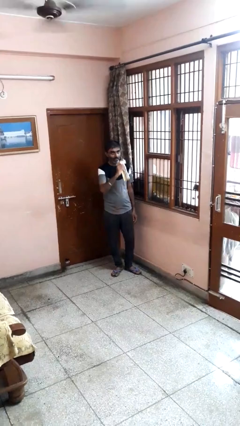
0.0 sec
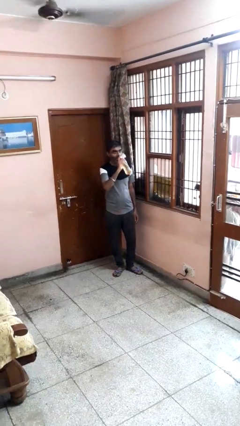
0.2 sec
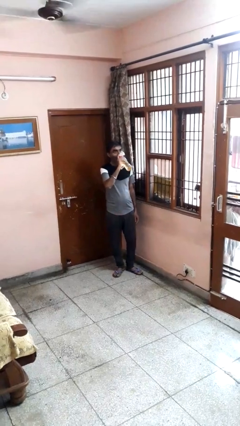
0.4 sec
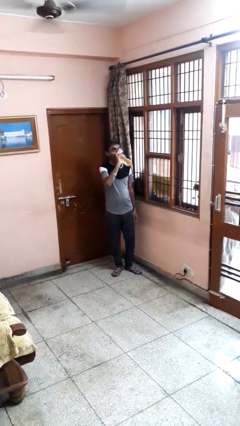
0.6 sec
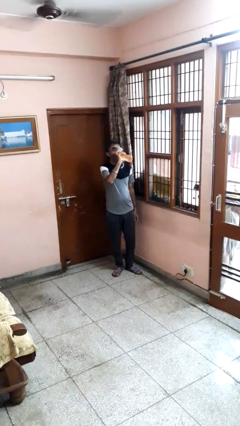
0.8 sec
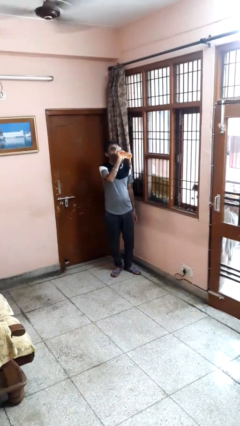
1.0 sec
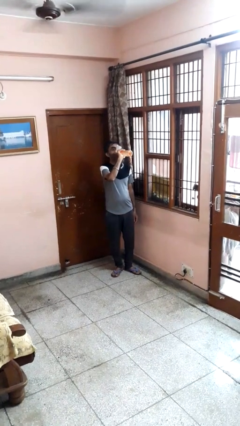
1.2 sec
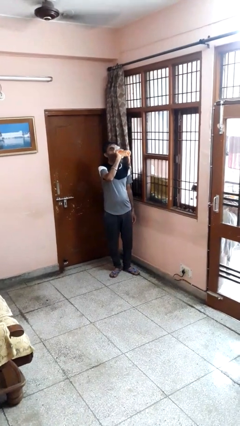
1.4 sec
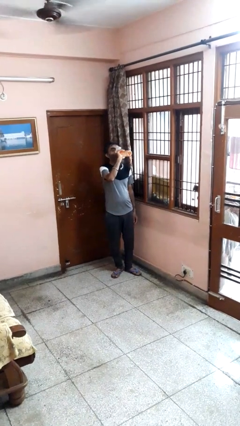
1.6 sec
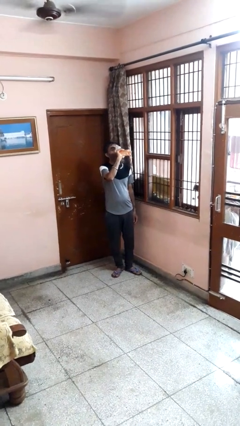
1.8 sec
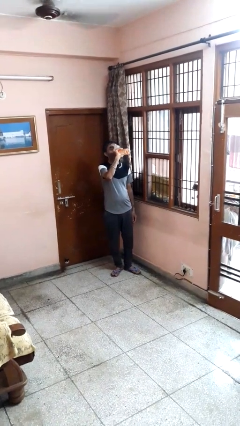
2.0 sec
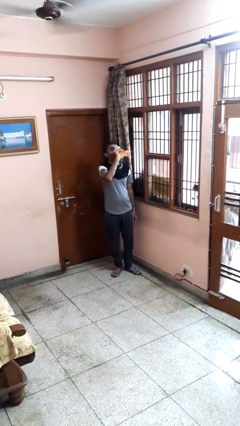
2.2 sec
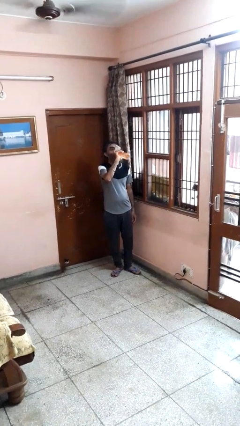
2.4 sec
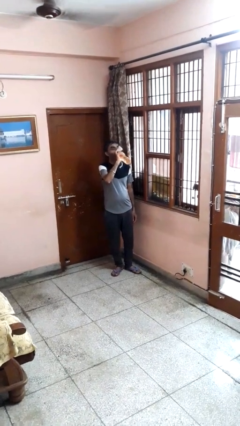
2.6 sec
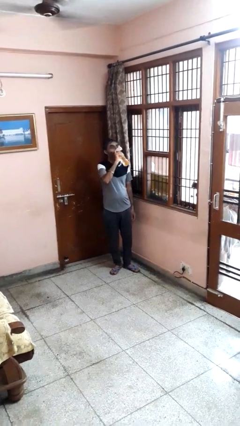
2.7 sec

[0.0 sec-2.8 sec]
person drinks from bottle

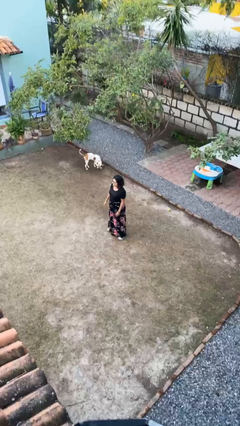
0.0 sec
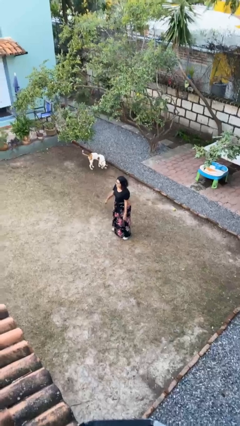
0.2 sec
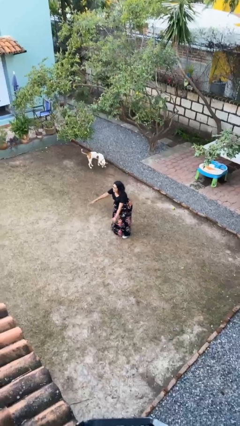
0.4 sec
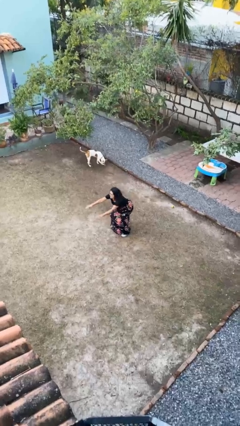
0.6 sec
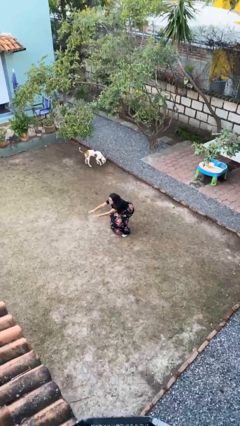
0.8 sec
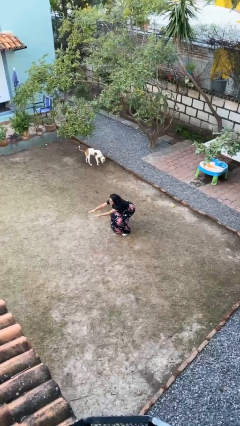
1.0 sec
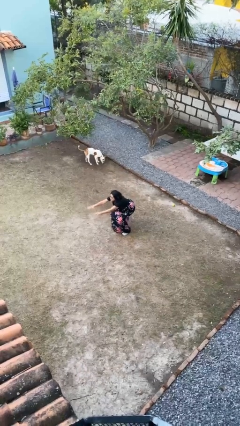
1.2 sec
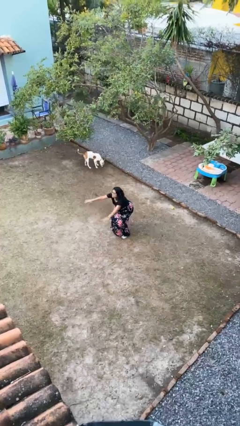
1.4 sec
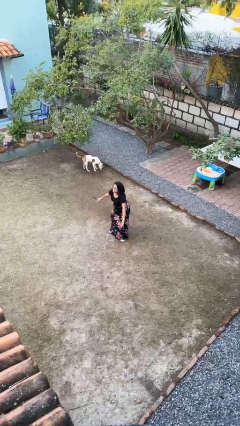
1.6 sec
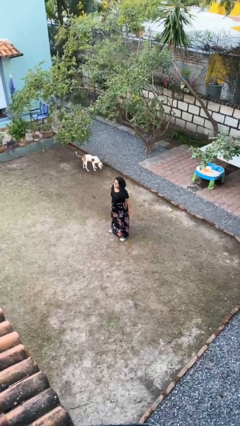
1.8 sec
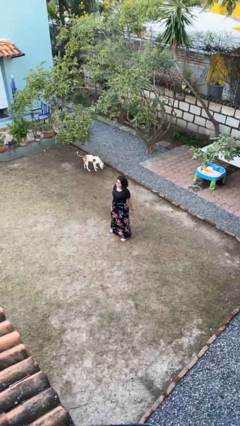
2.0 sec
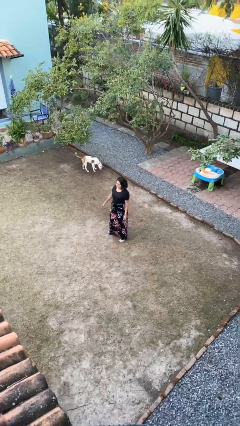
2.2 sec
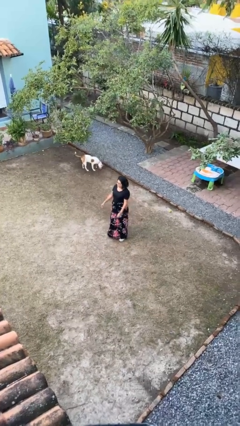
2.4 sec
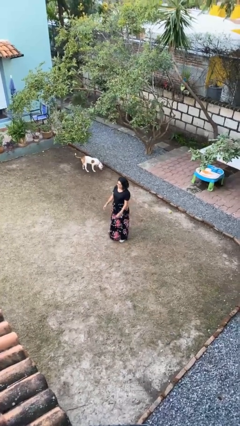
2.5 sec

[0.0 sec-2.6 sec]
person exercises with situp

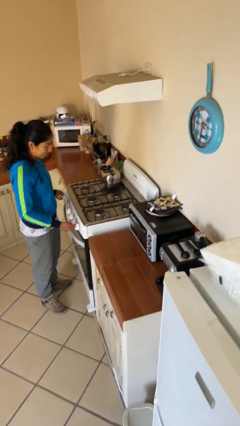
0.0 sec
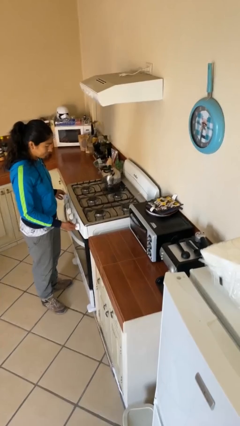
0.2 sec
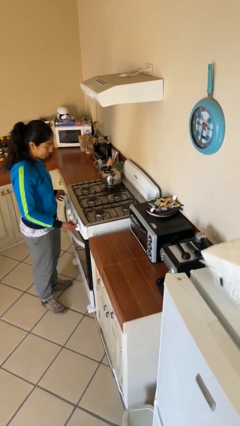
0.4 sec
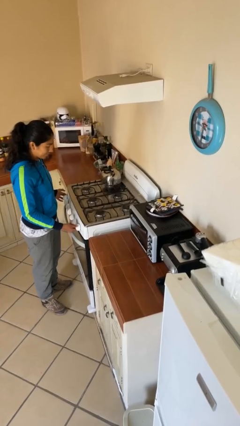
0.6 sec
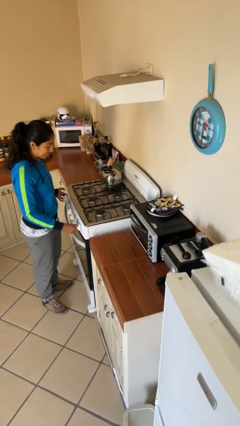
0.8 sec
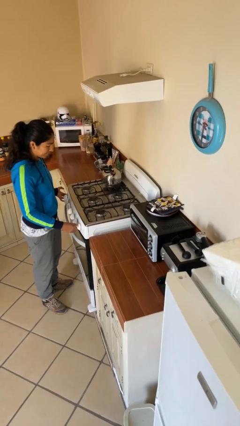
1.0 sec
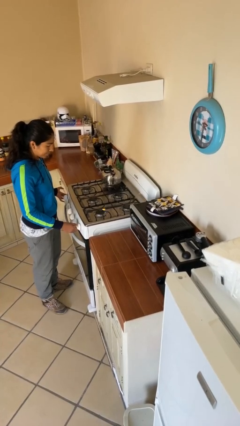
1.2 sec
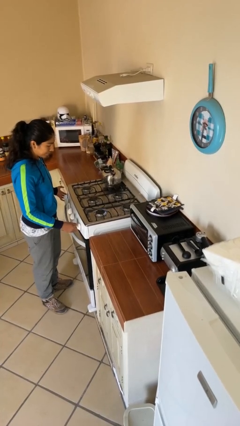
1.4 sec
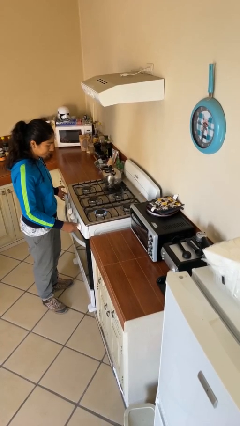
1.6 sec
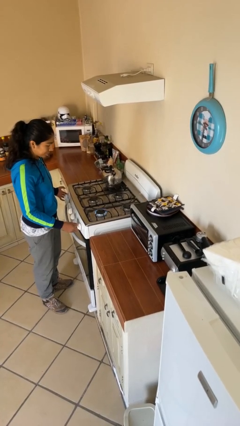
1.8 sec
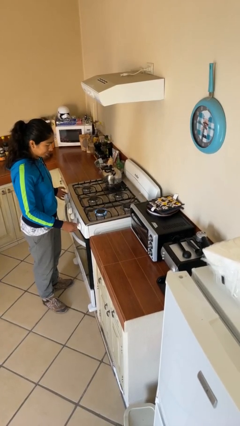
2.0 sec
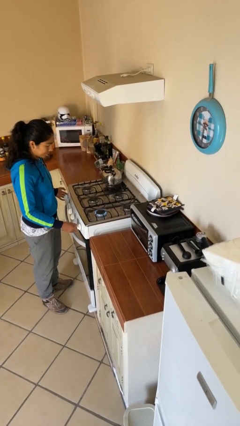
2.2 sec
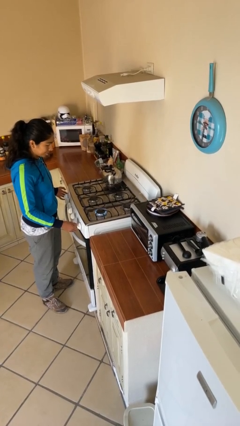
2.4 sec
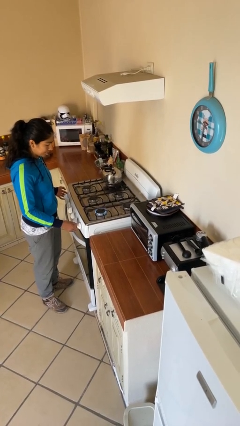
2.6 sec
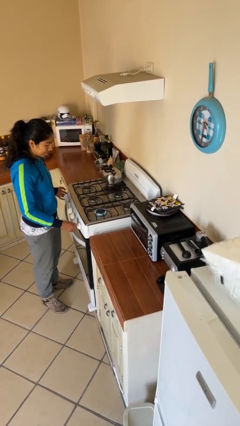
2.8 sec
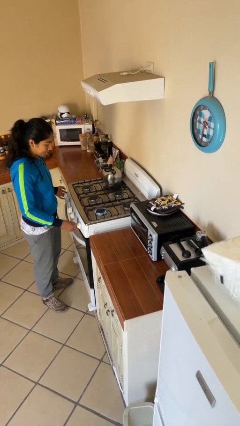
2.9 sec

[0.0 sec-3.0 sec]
person turns on stovetop

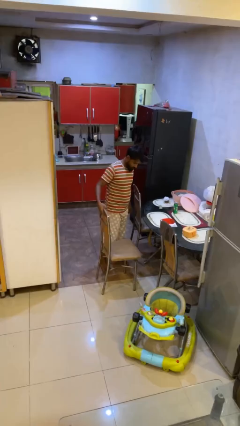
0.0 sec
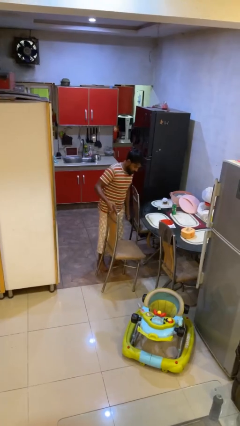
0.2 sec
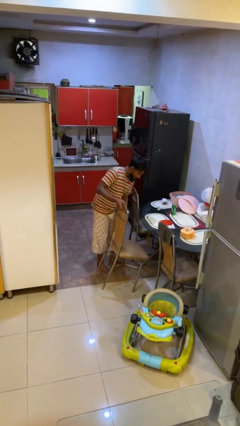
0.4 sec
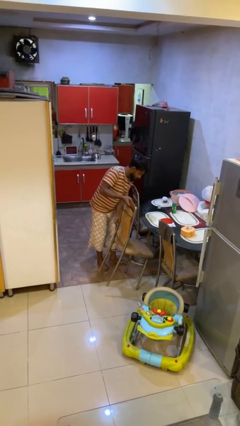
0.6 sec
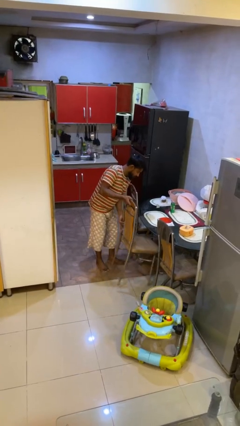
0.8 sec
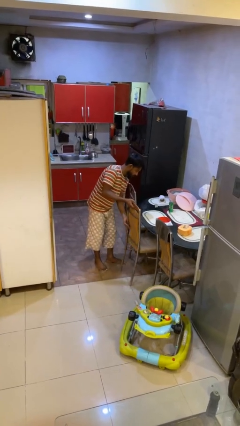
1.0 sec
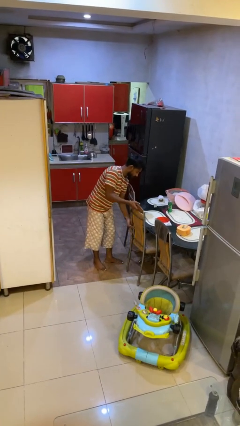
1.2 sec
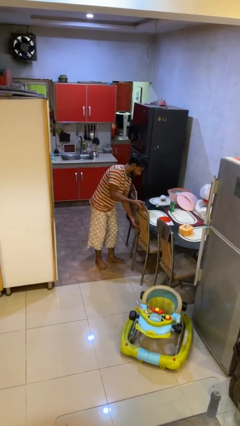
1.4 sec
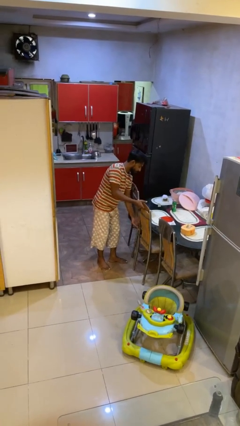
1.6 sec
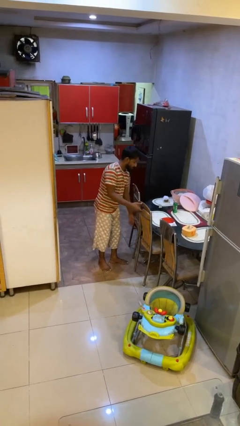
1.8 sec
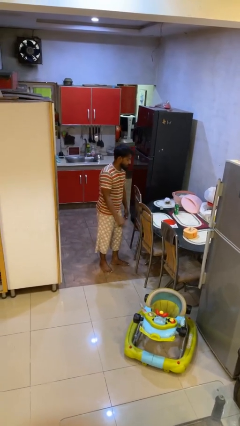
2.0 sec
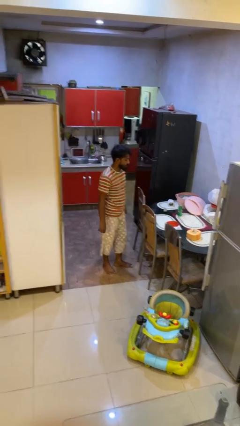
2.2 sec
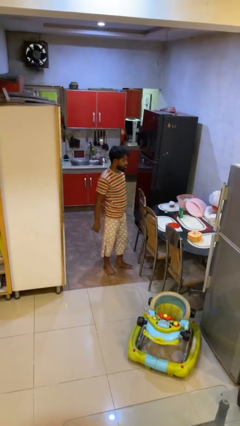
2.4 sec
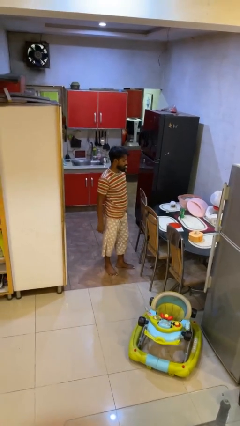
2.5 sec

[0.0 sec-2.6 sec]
person pushes in chair

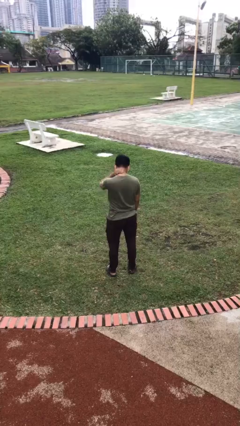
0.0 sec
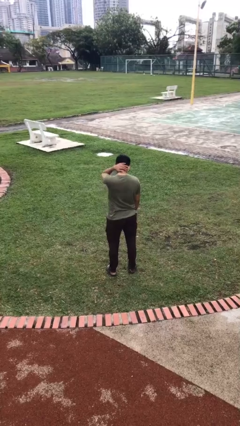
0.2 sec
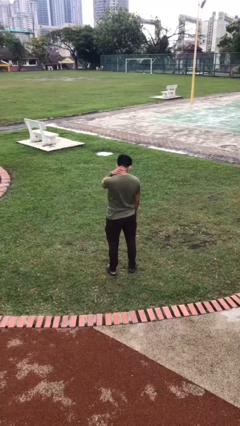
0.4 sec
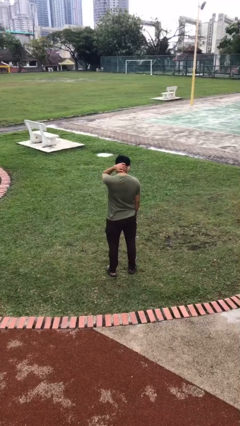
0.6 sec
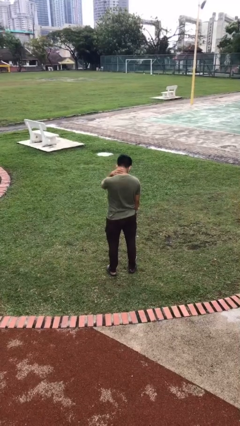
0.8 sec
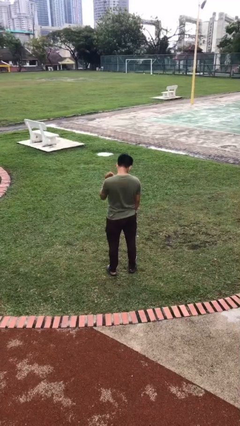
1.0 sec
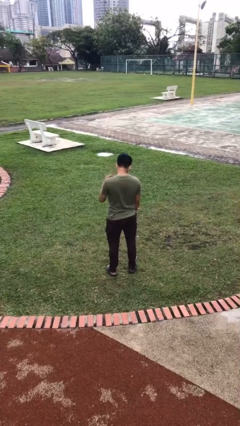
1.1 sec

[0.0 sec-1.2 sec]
person rubs neck

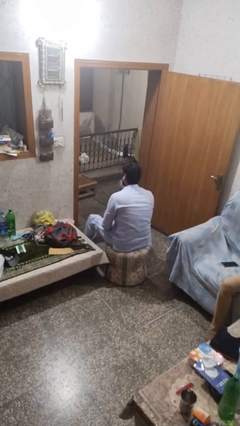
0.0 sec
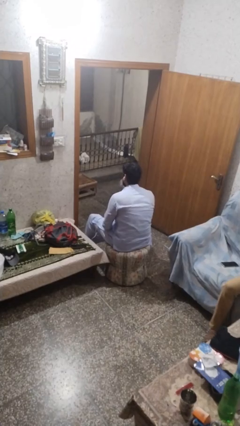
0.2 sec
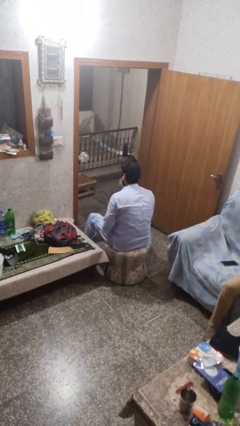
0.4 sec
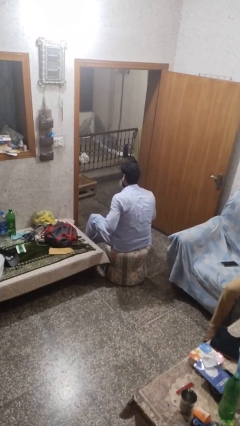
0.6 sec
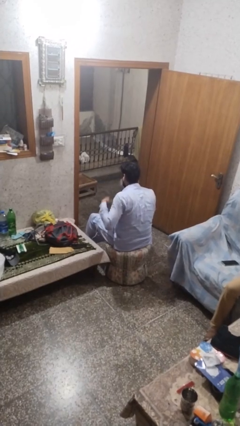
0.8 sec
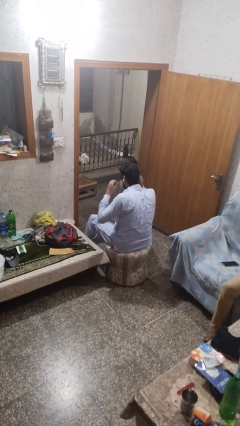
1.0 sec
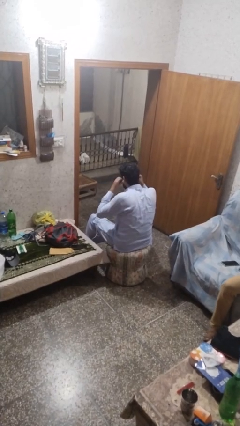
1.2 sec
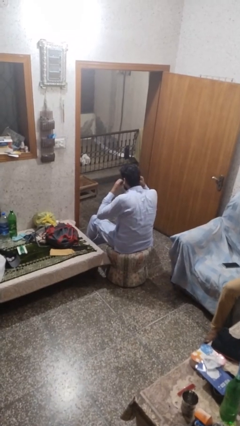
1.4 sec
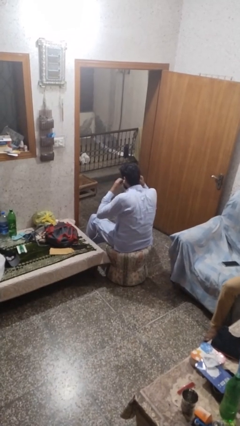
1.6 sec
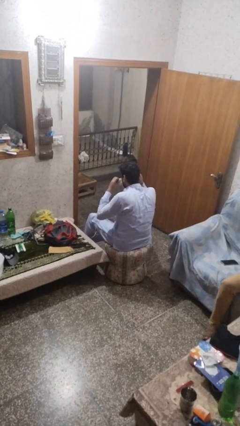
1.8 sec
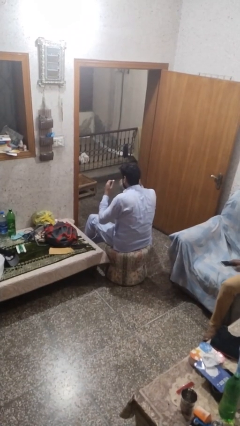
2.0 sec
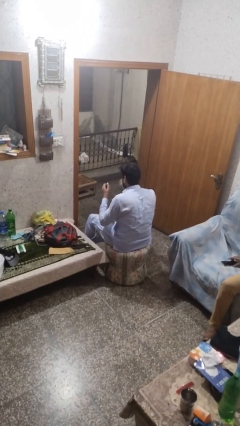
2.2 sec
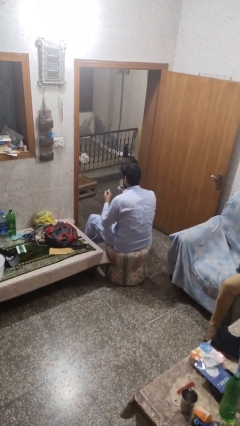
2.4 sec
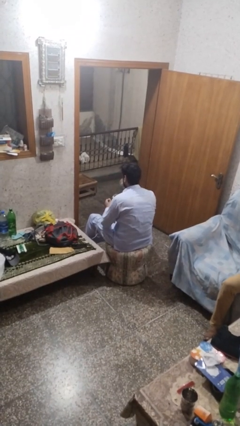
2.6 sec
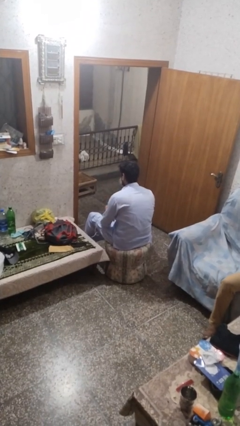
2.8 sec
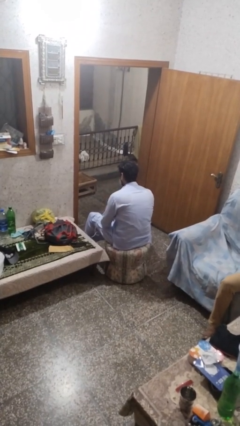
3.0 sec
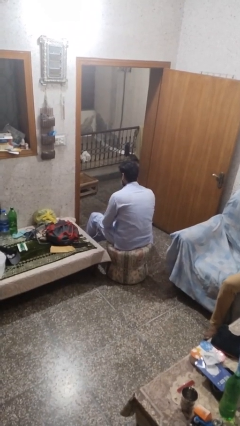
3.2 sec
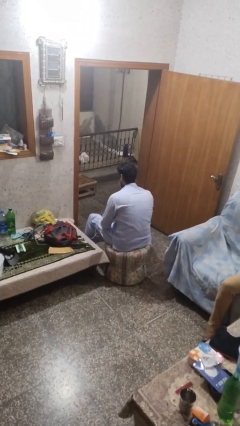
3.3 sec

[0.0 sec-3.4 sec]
person takes off headphones

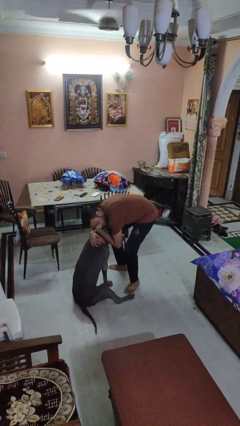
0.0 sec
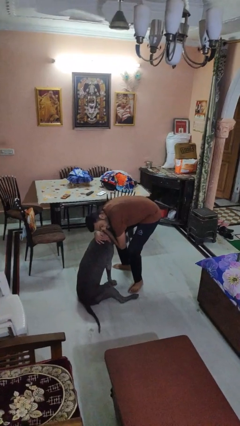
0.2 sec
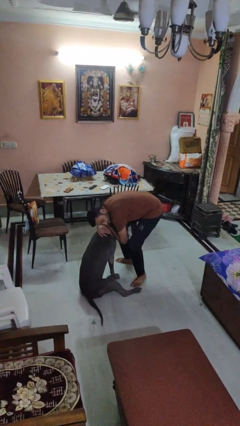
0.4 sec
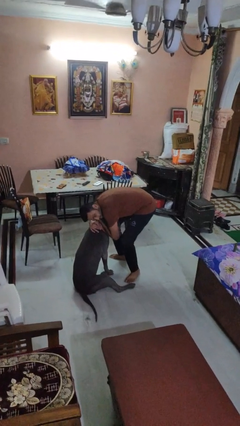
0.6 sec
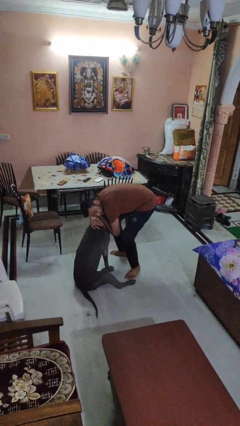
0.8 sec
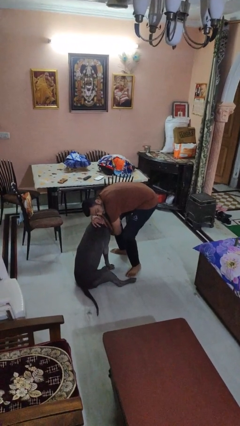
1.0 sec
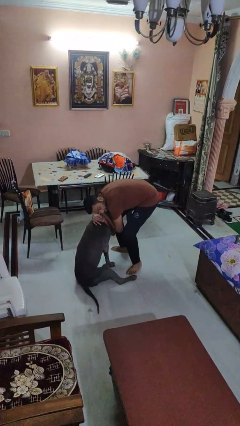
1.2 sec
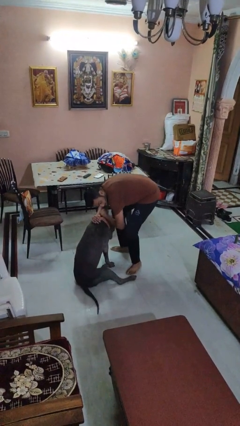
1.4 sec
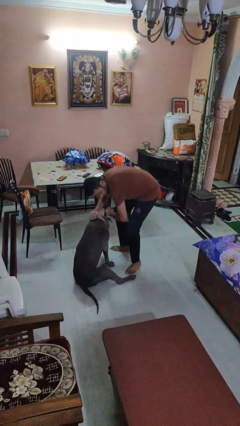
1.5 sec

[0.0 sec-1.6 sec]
person hugs dog
